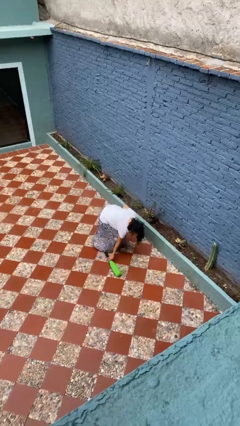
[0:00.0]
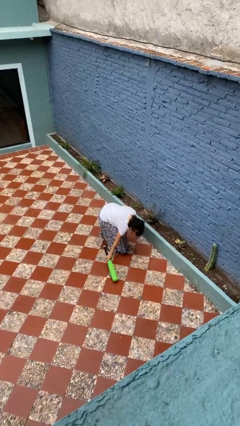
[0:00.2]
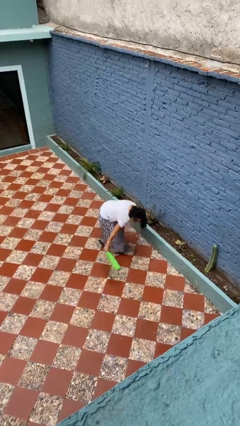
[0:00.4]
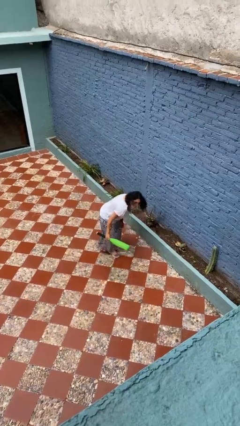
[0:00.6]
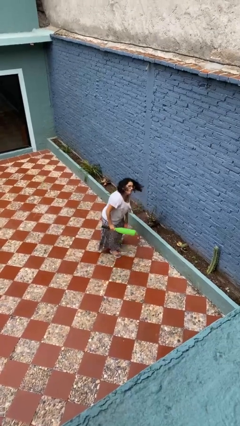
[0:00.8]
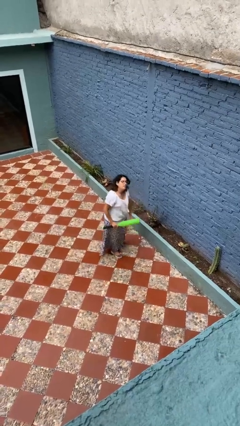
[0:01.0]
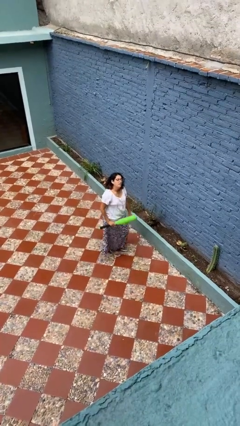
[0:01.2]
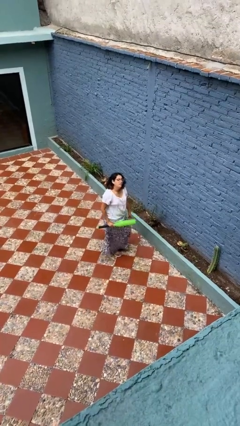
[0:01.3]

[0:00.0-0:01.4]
person picks up object from floor

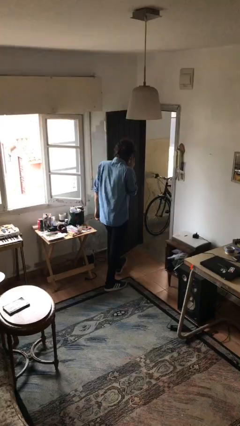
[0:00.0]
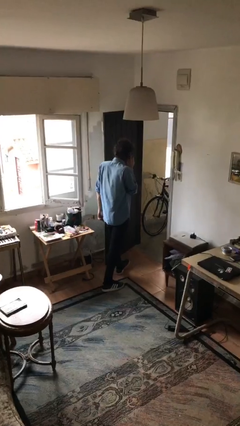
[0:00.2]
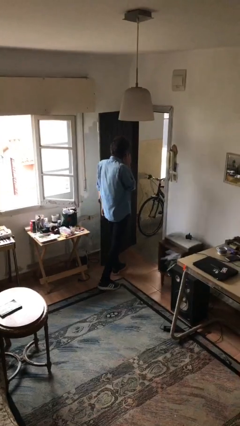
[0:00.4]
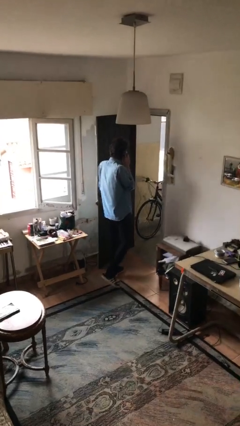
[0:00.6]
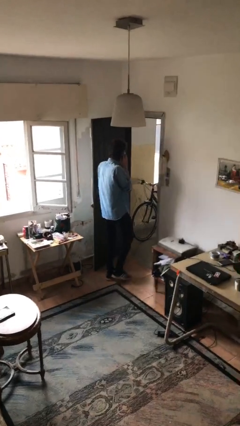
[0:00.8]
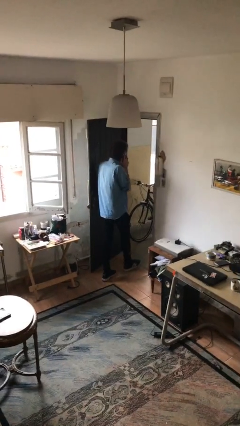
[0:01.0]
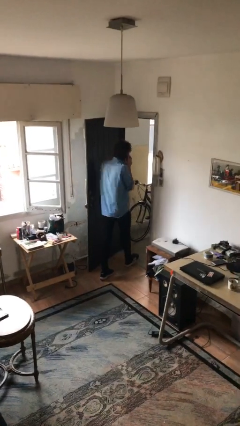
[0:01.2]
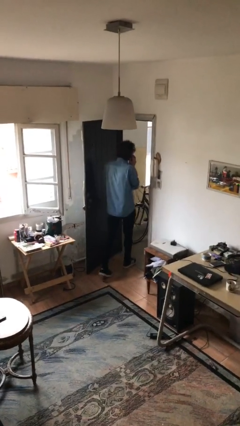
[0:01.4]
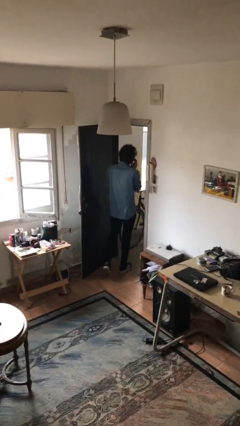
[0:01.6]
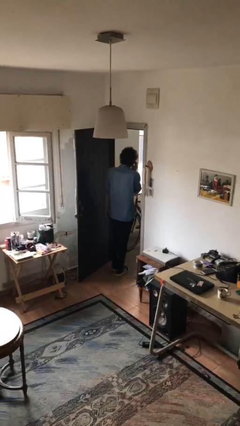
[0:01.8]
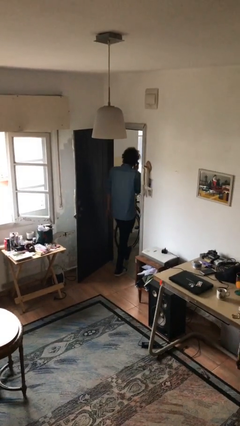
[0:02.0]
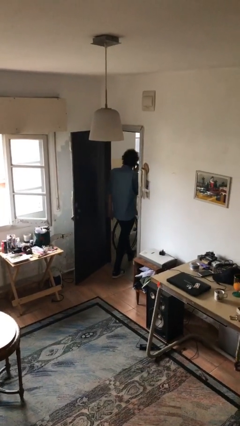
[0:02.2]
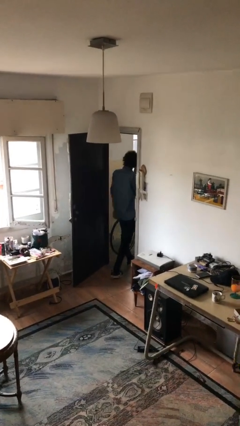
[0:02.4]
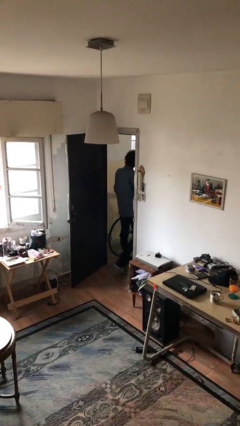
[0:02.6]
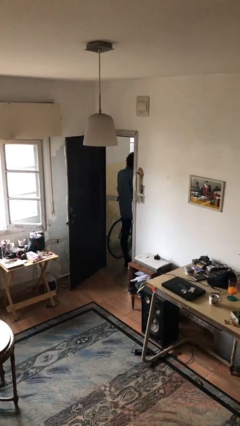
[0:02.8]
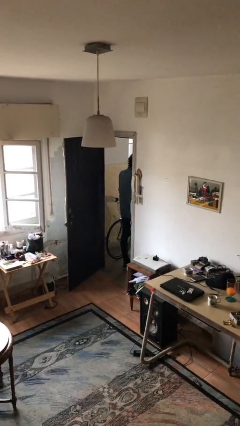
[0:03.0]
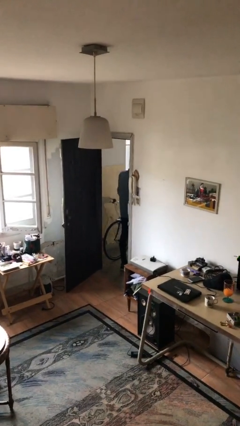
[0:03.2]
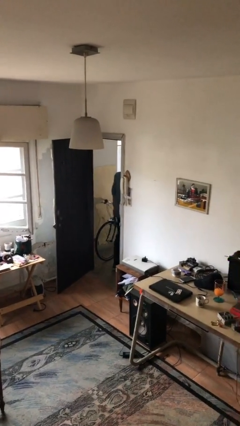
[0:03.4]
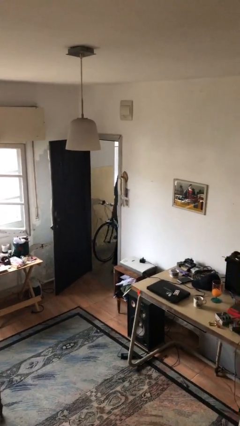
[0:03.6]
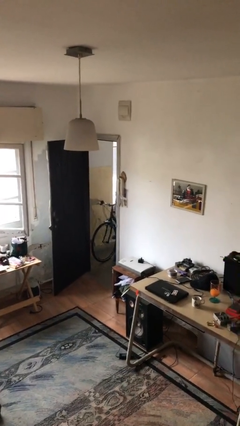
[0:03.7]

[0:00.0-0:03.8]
person exits scene through structure

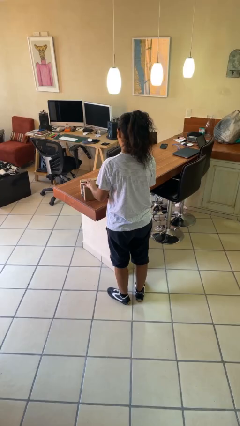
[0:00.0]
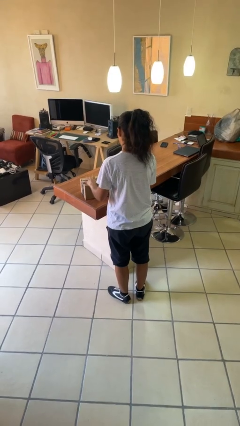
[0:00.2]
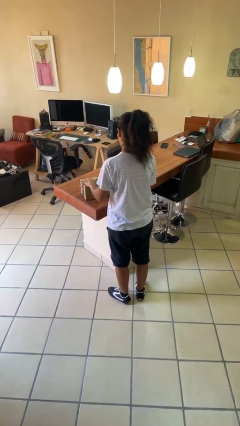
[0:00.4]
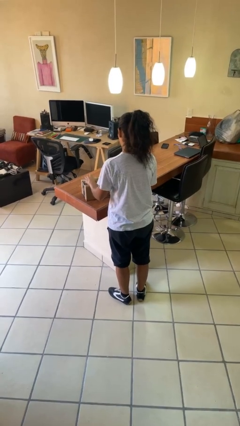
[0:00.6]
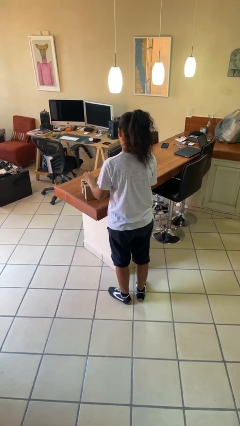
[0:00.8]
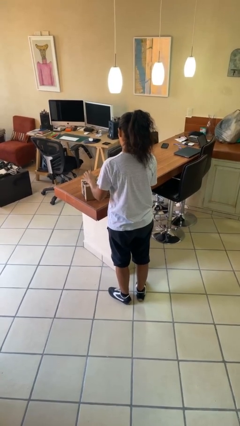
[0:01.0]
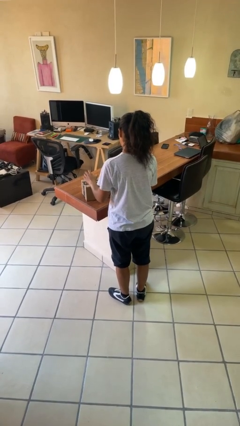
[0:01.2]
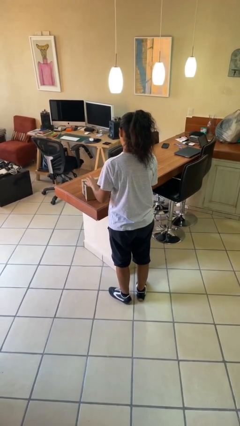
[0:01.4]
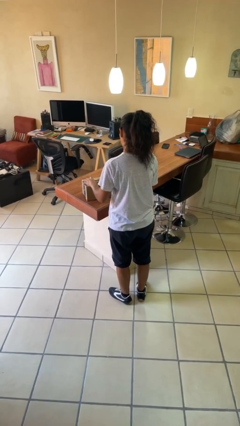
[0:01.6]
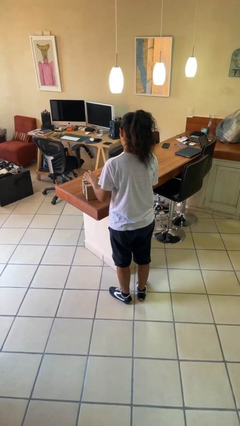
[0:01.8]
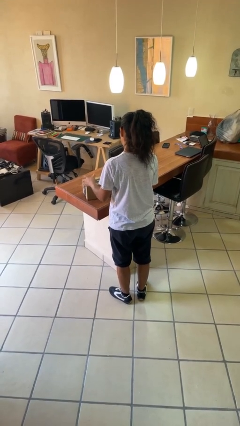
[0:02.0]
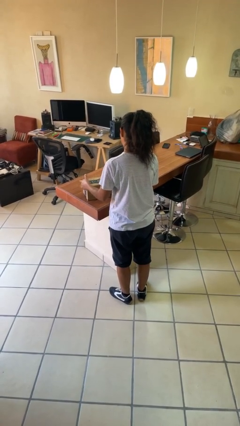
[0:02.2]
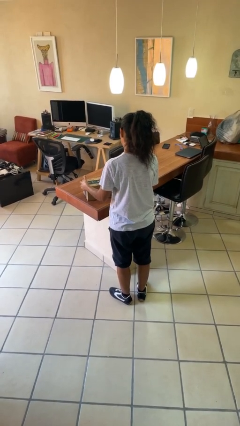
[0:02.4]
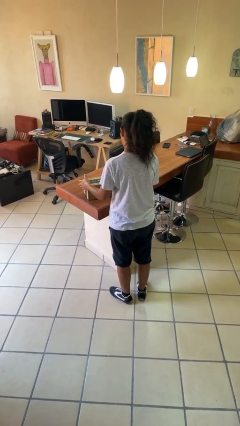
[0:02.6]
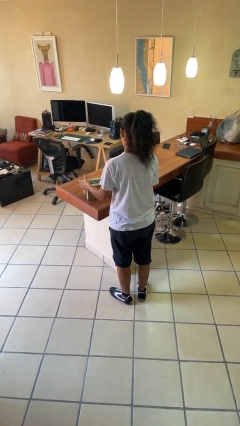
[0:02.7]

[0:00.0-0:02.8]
person taps object with finger

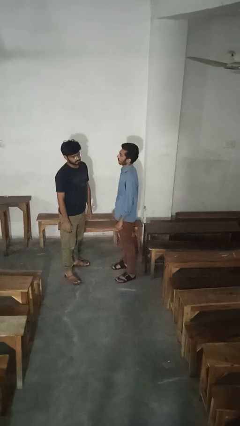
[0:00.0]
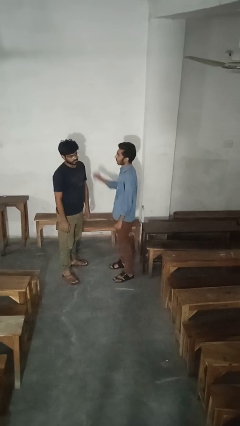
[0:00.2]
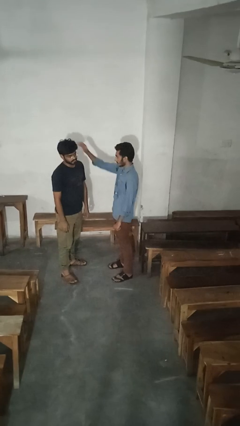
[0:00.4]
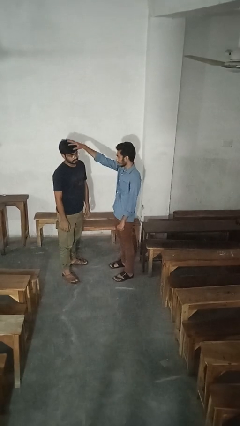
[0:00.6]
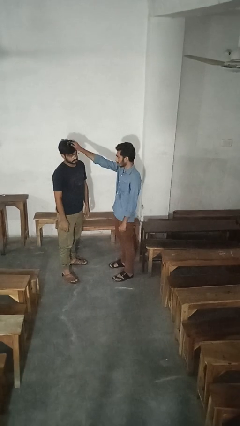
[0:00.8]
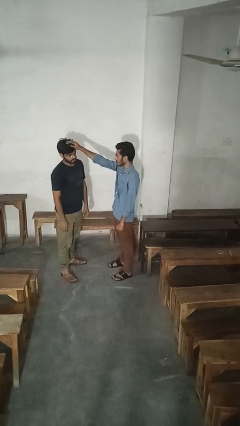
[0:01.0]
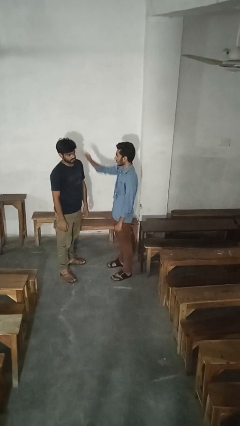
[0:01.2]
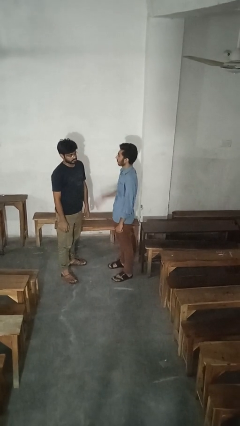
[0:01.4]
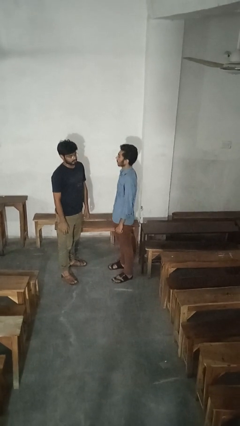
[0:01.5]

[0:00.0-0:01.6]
person grabs person by hair

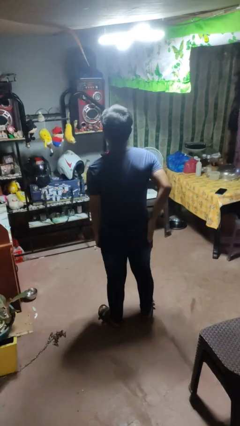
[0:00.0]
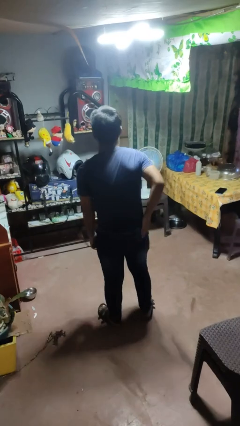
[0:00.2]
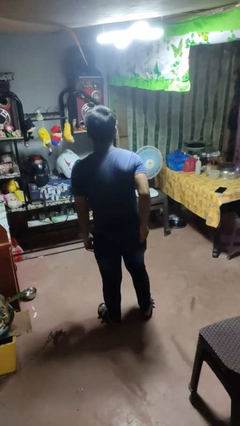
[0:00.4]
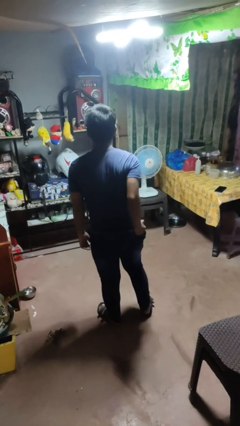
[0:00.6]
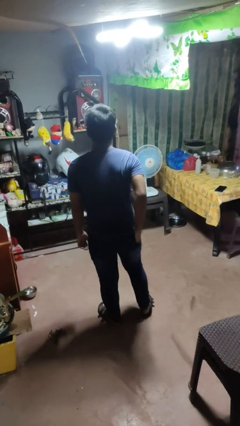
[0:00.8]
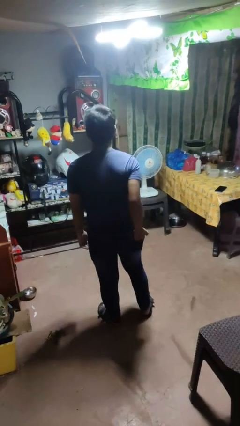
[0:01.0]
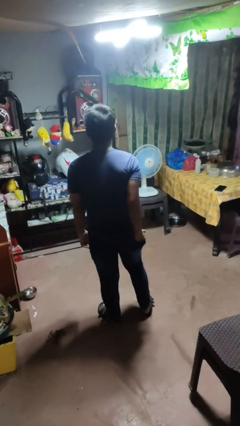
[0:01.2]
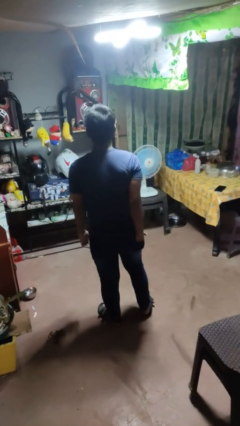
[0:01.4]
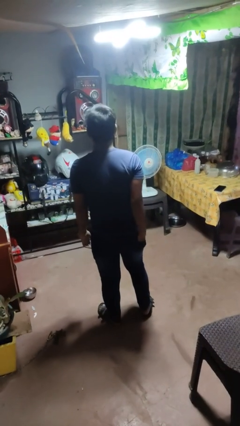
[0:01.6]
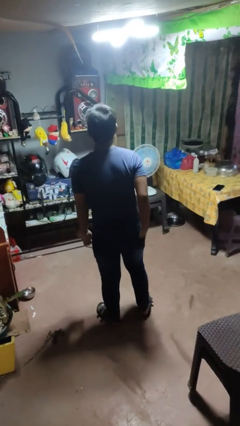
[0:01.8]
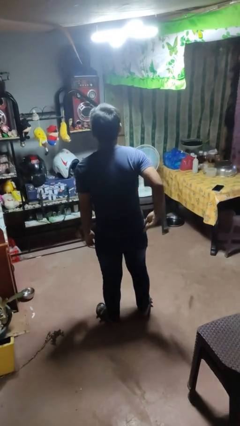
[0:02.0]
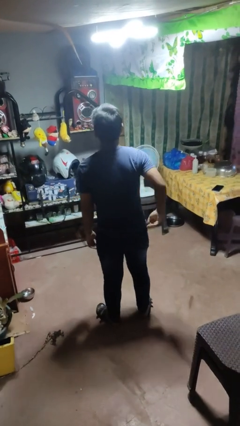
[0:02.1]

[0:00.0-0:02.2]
person puts hands in back pockets

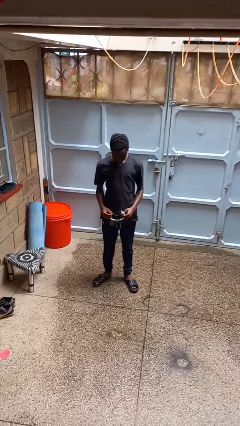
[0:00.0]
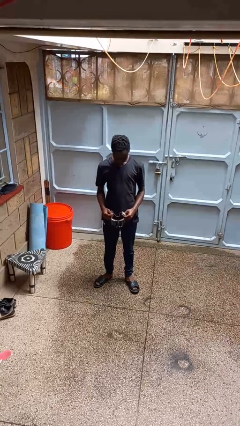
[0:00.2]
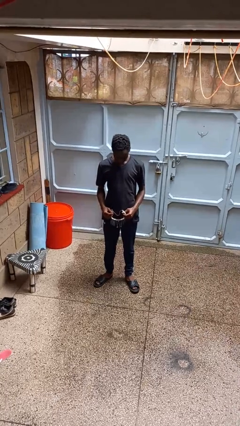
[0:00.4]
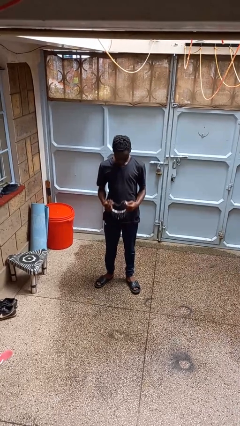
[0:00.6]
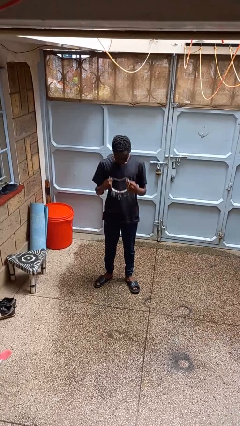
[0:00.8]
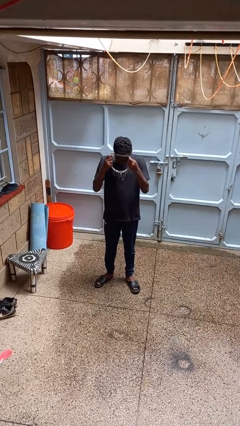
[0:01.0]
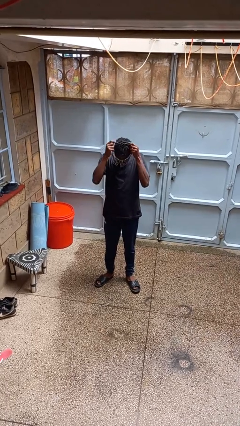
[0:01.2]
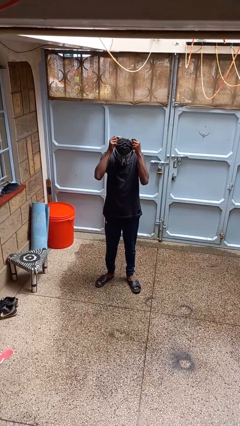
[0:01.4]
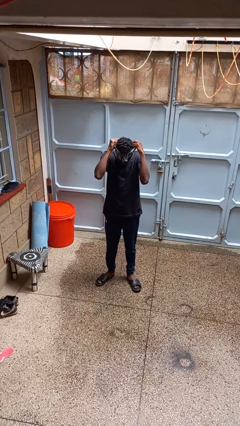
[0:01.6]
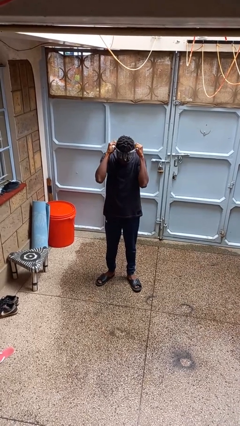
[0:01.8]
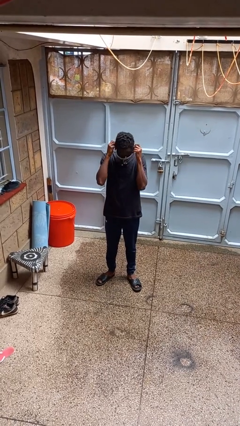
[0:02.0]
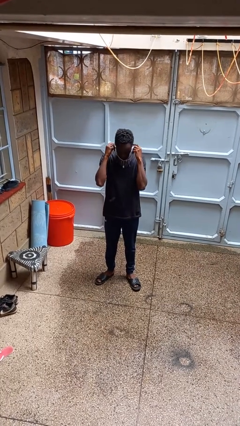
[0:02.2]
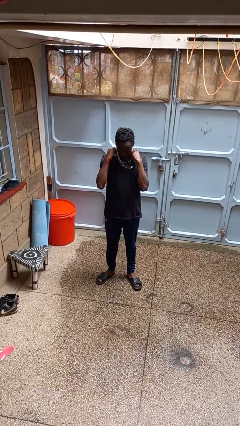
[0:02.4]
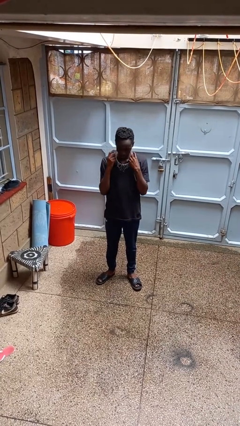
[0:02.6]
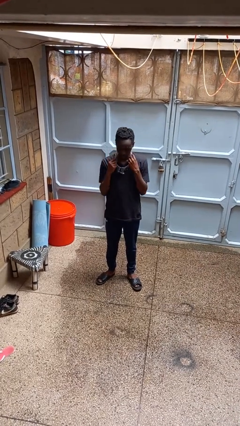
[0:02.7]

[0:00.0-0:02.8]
person puts on necklace

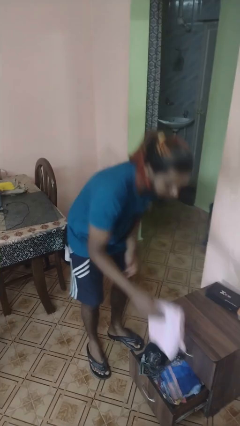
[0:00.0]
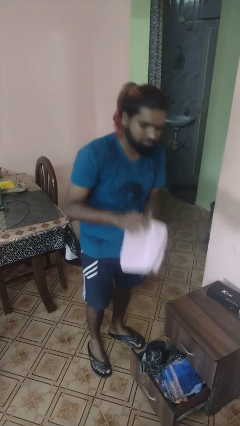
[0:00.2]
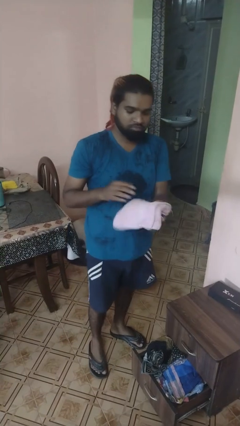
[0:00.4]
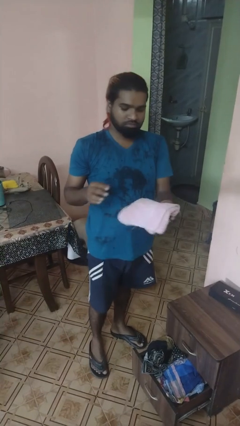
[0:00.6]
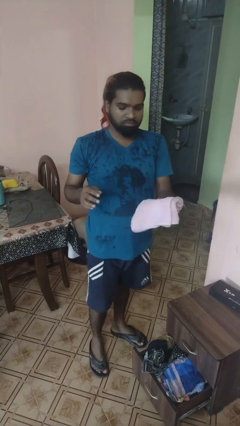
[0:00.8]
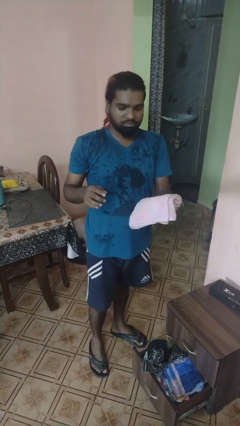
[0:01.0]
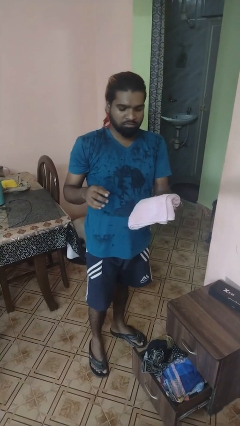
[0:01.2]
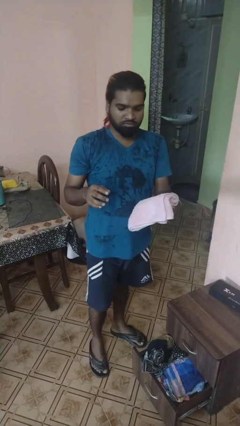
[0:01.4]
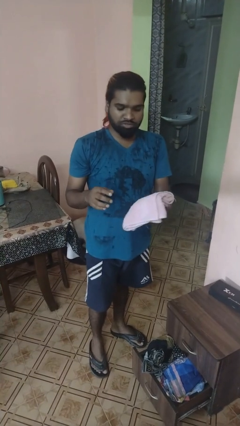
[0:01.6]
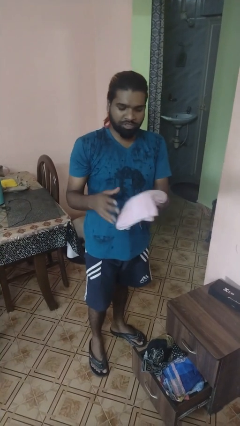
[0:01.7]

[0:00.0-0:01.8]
person takes clothes from dresser

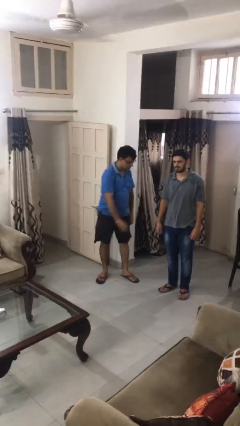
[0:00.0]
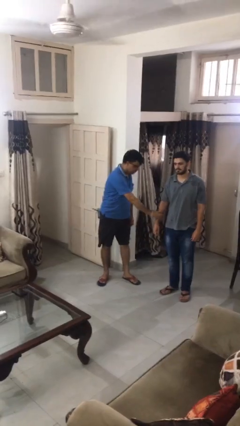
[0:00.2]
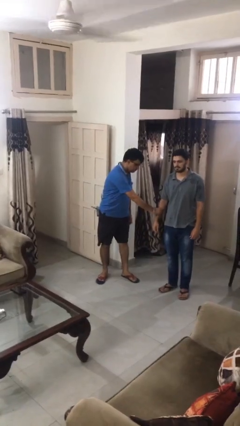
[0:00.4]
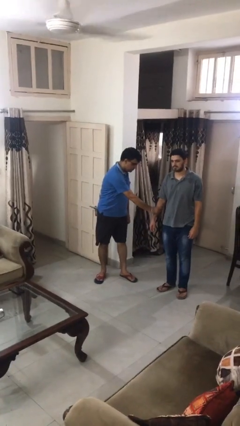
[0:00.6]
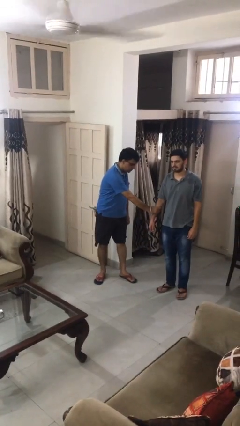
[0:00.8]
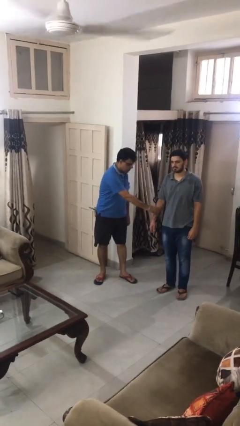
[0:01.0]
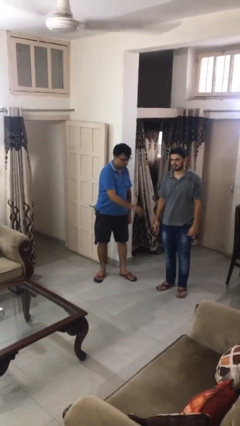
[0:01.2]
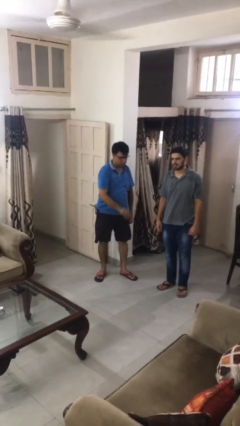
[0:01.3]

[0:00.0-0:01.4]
person grabs person by forearm
